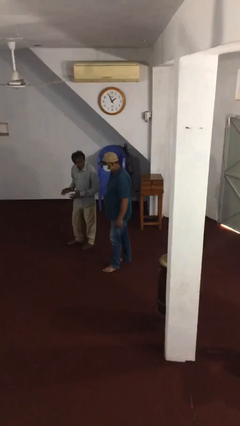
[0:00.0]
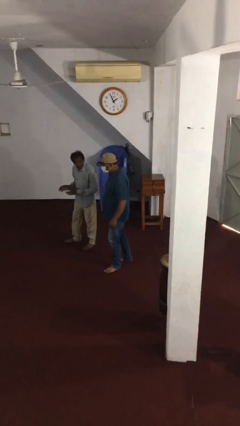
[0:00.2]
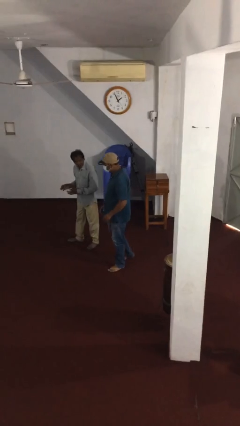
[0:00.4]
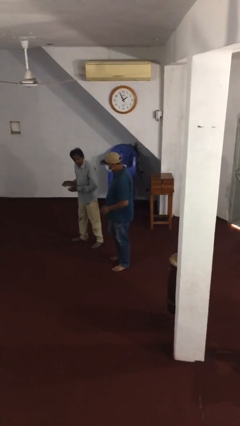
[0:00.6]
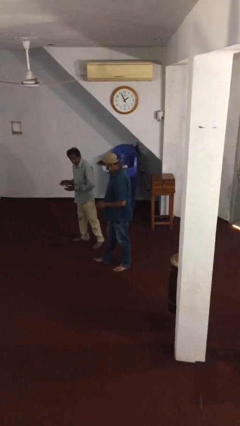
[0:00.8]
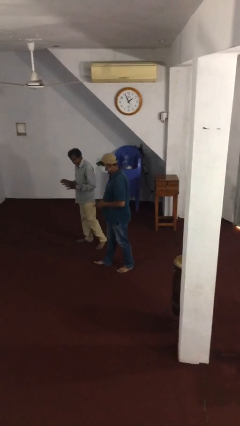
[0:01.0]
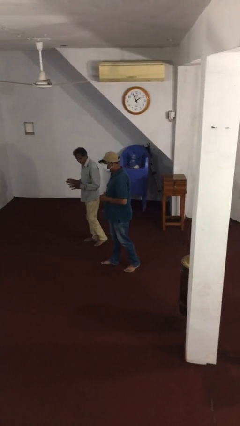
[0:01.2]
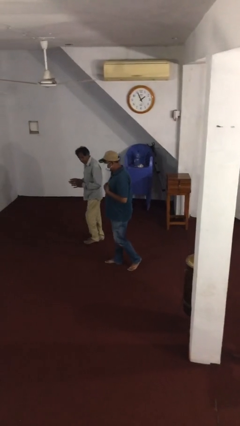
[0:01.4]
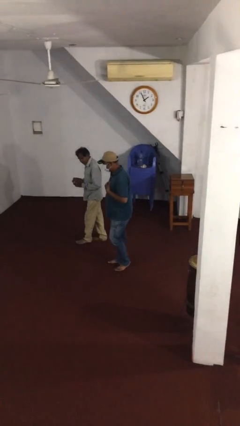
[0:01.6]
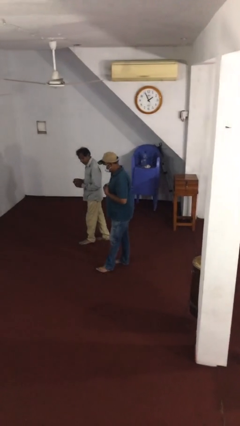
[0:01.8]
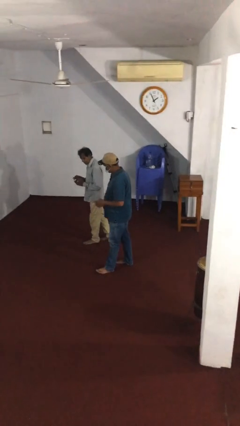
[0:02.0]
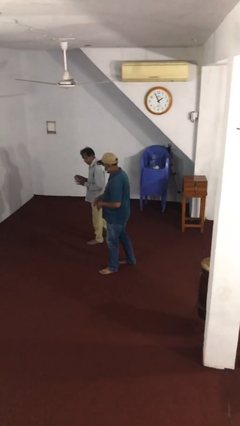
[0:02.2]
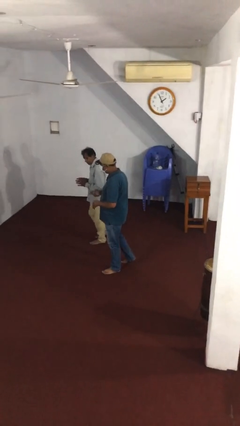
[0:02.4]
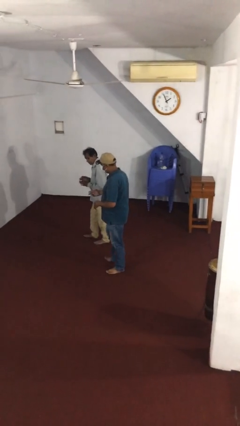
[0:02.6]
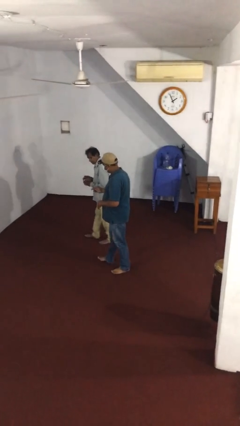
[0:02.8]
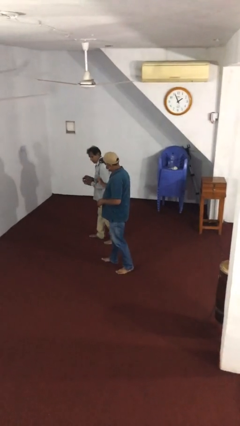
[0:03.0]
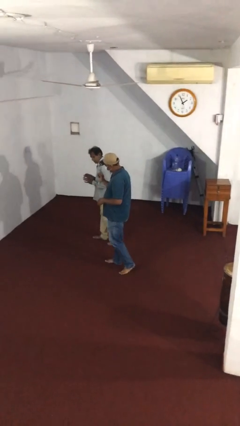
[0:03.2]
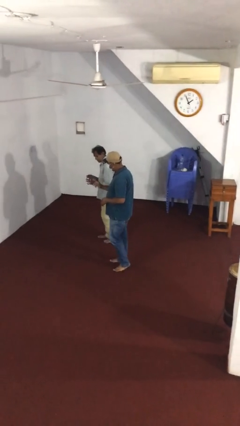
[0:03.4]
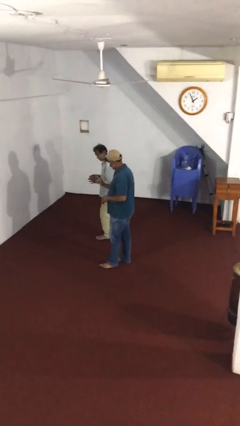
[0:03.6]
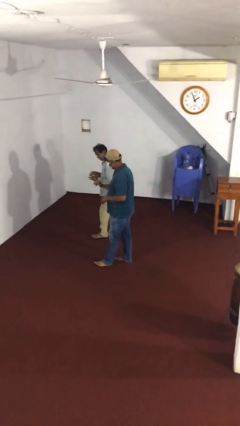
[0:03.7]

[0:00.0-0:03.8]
person talks to person

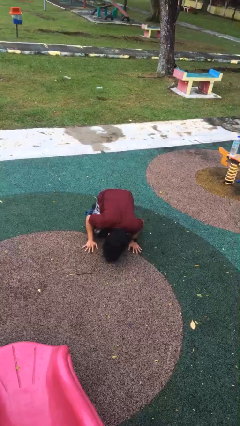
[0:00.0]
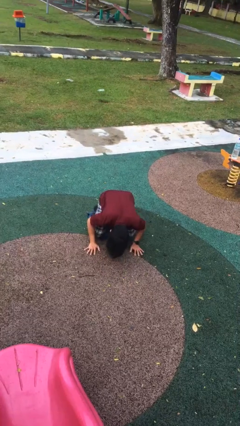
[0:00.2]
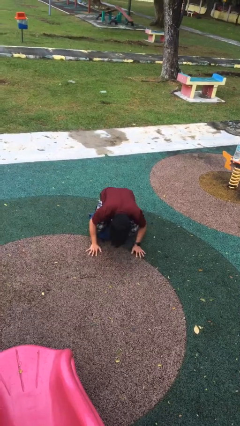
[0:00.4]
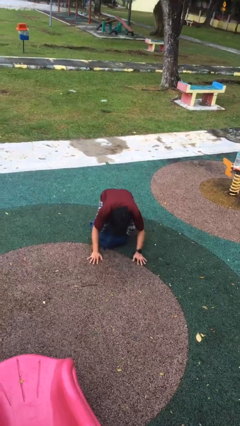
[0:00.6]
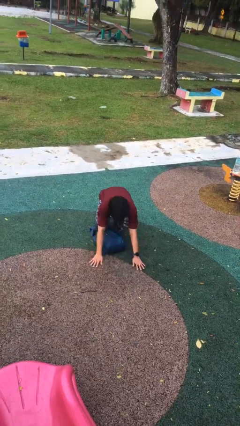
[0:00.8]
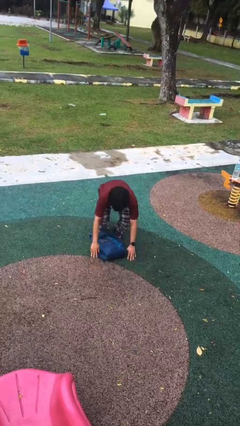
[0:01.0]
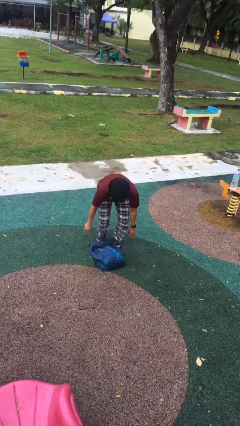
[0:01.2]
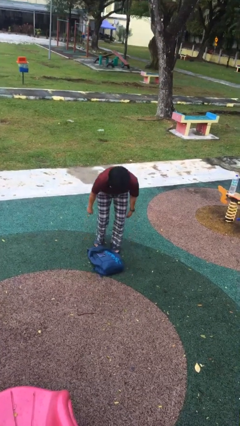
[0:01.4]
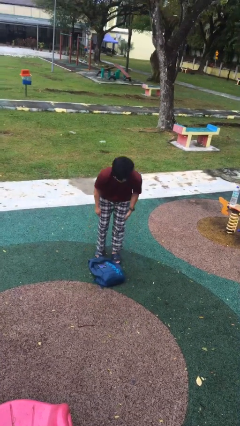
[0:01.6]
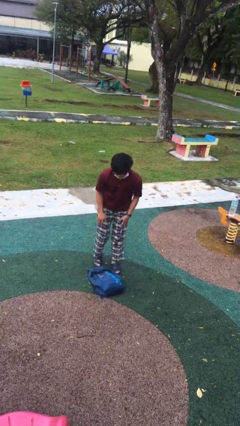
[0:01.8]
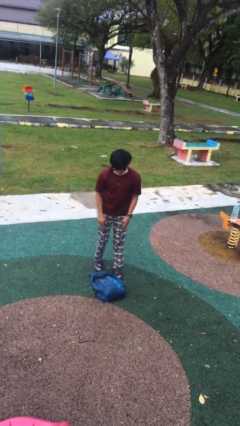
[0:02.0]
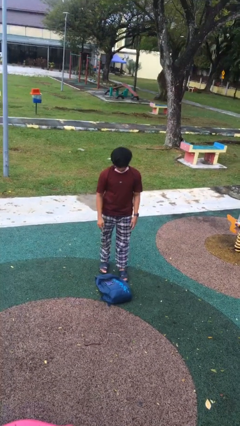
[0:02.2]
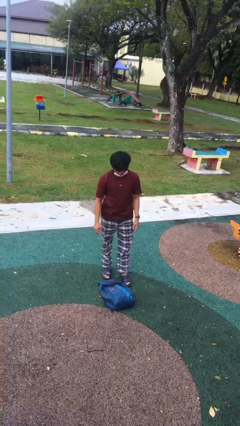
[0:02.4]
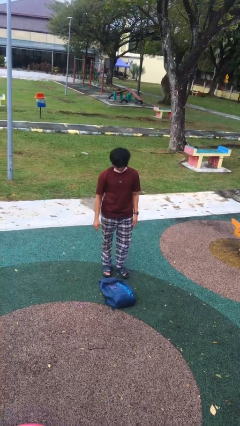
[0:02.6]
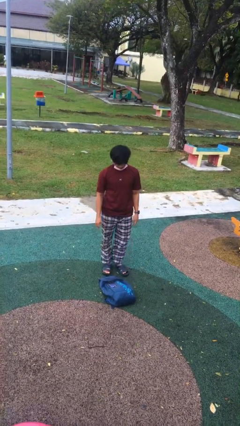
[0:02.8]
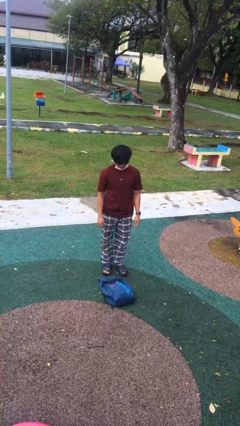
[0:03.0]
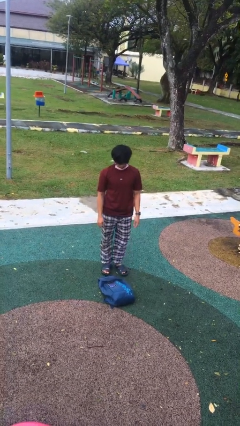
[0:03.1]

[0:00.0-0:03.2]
person stands up from floor

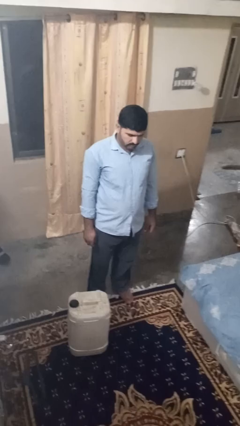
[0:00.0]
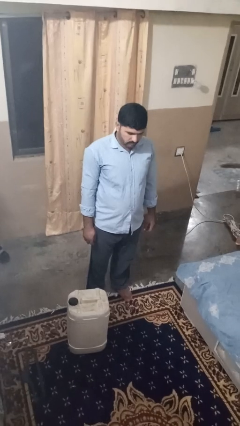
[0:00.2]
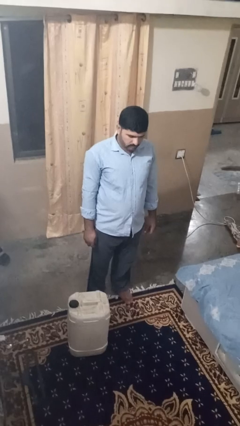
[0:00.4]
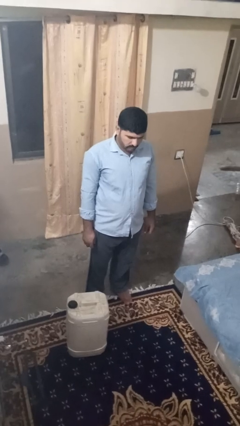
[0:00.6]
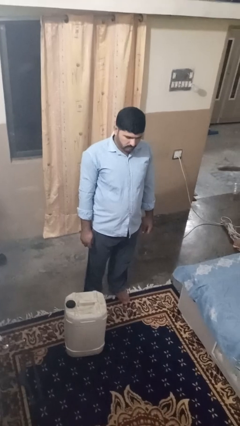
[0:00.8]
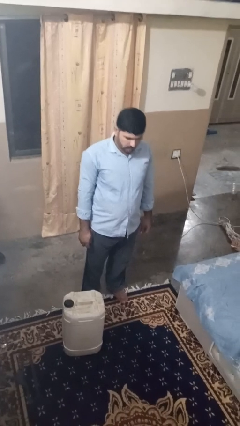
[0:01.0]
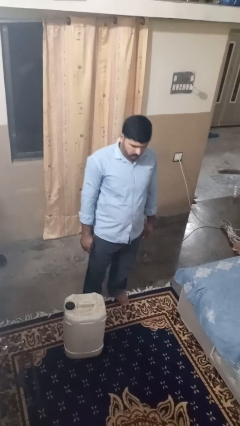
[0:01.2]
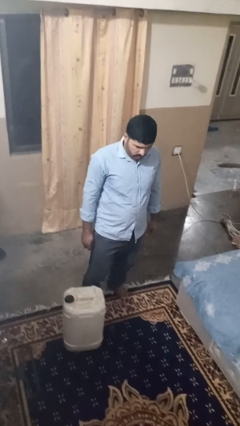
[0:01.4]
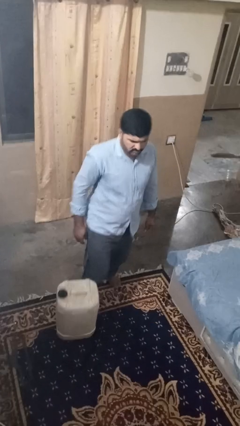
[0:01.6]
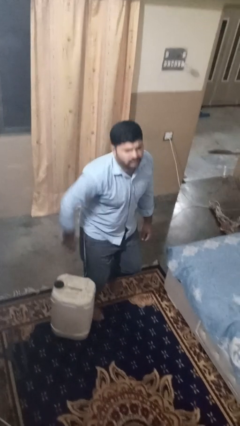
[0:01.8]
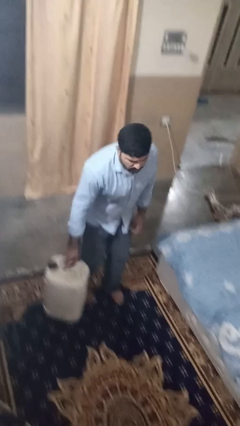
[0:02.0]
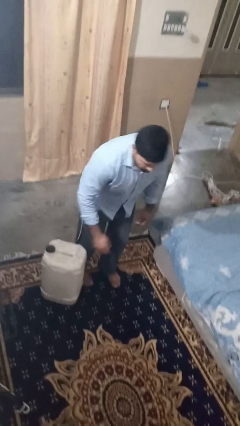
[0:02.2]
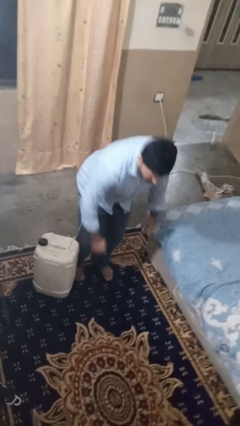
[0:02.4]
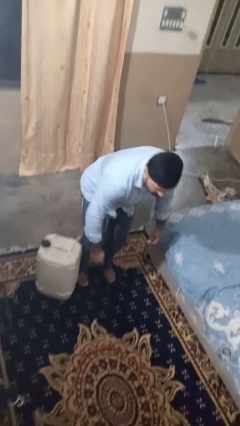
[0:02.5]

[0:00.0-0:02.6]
person trips on object on floor

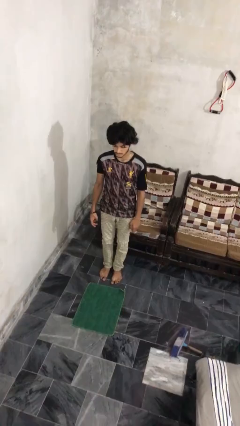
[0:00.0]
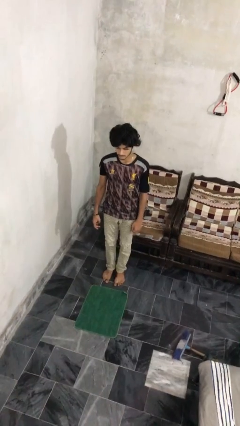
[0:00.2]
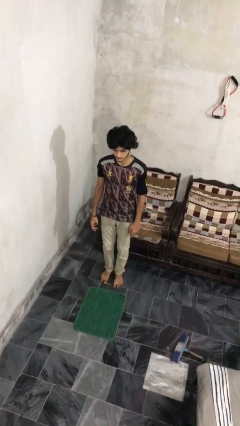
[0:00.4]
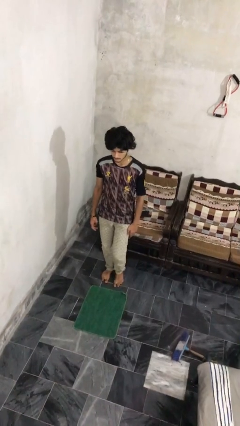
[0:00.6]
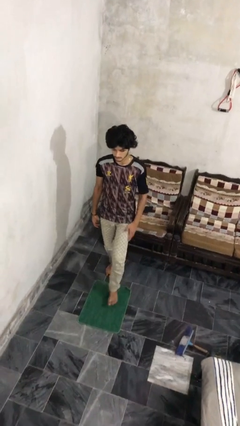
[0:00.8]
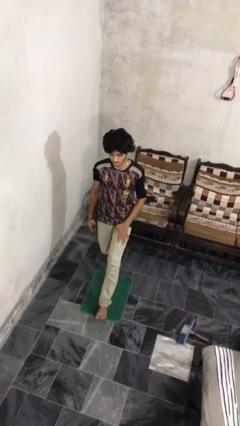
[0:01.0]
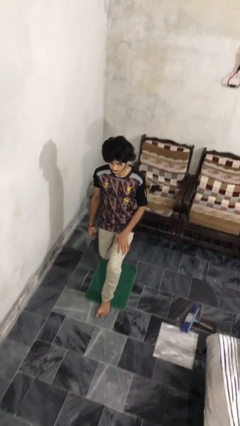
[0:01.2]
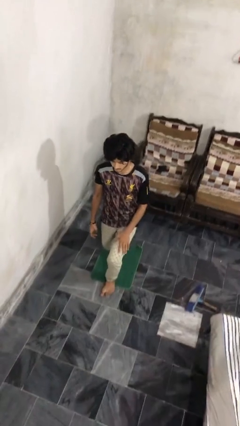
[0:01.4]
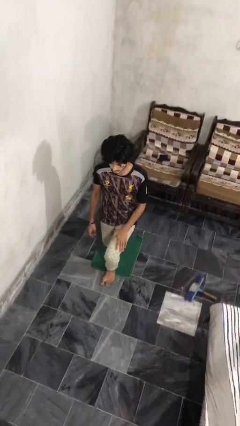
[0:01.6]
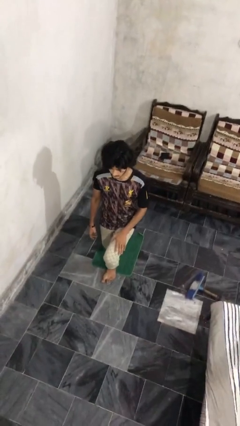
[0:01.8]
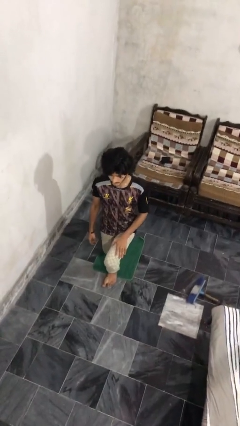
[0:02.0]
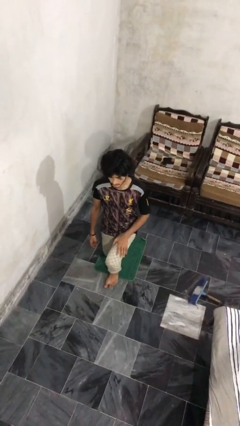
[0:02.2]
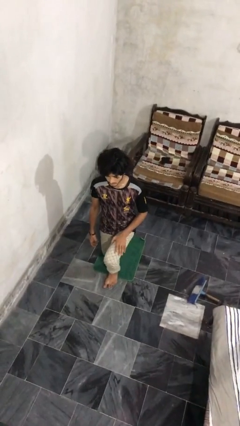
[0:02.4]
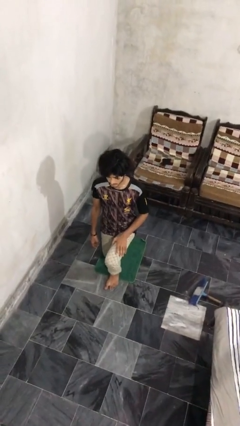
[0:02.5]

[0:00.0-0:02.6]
person kneels

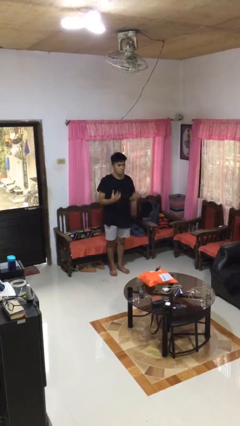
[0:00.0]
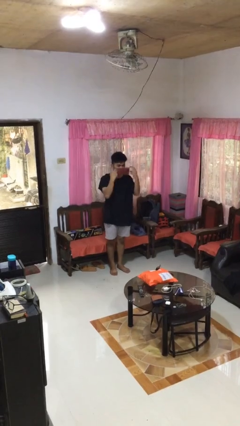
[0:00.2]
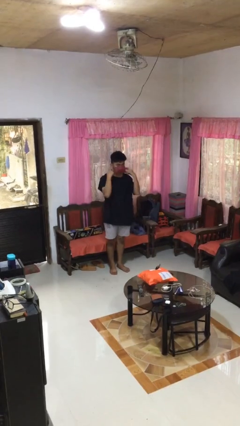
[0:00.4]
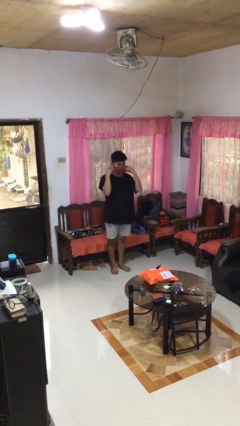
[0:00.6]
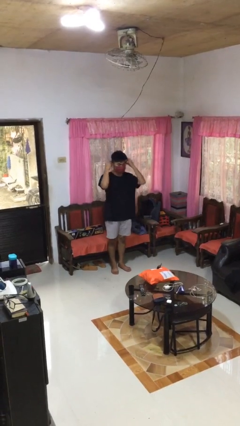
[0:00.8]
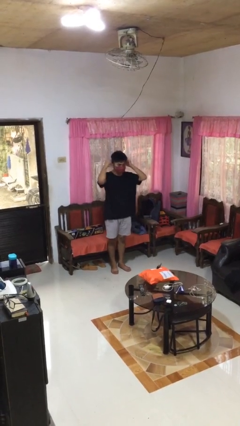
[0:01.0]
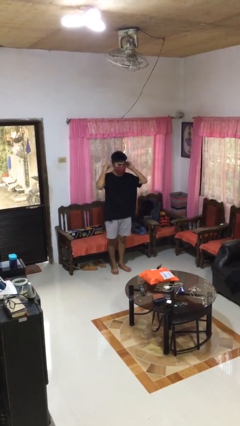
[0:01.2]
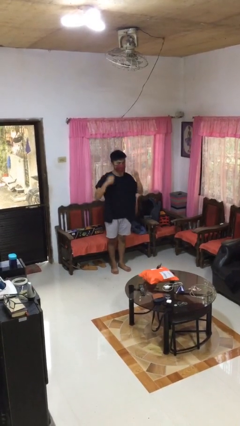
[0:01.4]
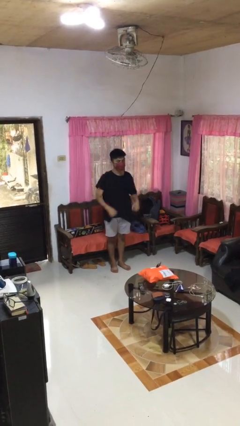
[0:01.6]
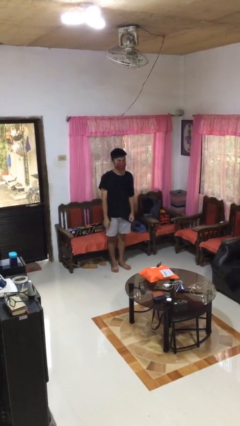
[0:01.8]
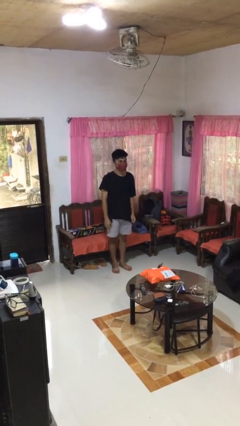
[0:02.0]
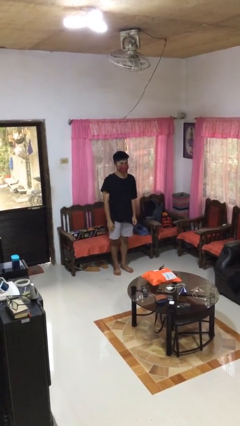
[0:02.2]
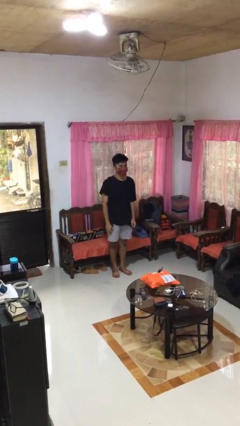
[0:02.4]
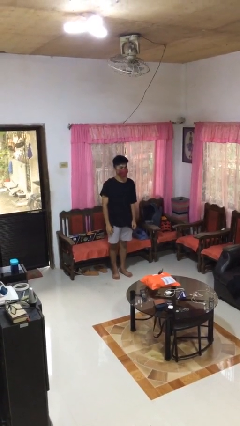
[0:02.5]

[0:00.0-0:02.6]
person puts on facemask

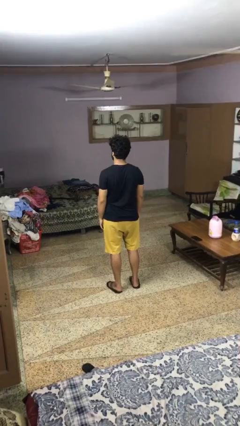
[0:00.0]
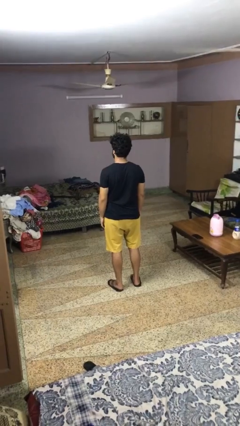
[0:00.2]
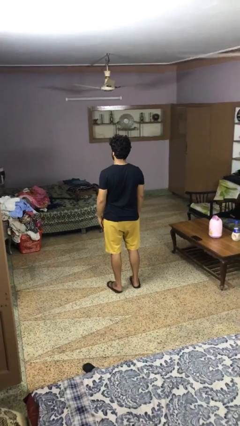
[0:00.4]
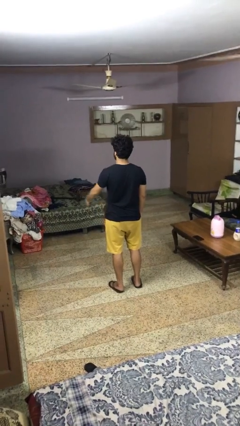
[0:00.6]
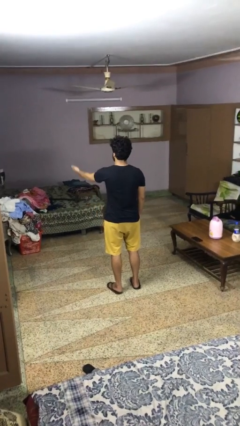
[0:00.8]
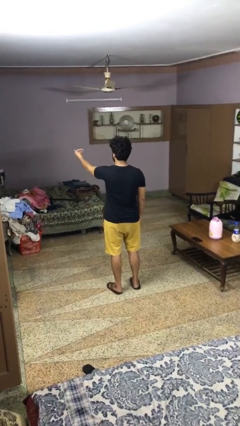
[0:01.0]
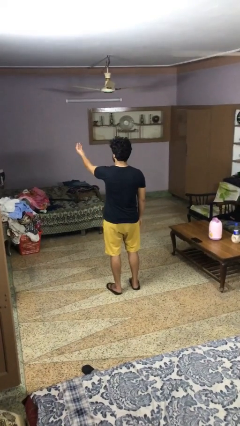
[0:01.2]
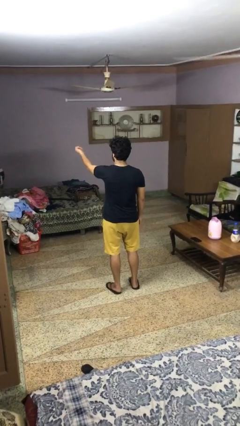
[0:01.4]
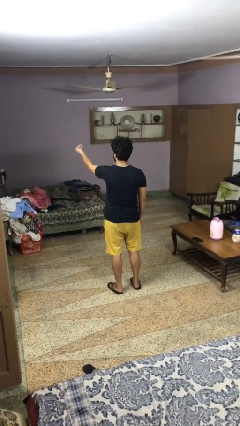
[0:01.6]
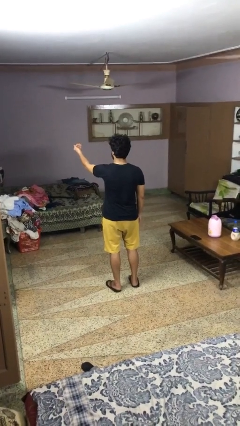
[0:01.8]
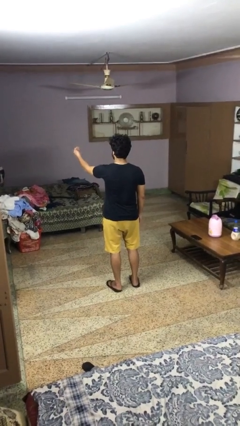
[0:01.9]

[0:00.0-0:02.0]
person gestures come here

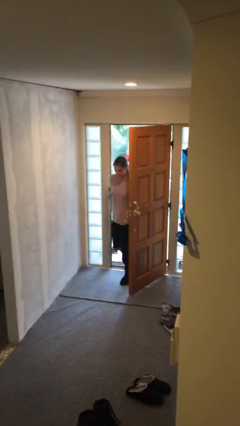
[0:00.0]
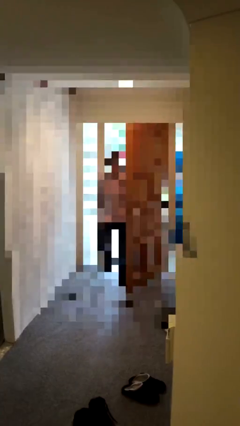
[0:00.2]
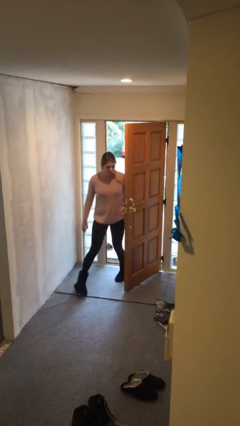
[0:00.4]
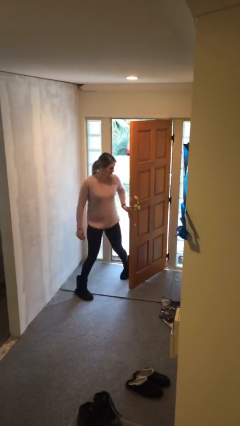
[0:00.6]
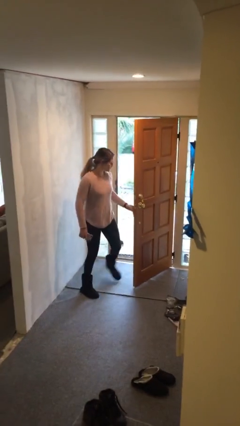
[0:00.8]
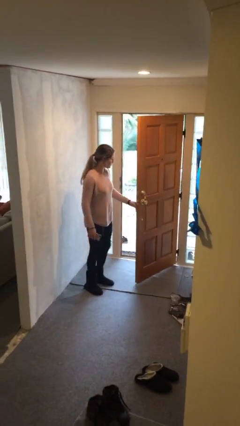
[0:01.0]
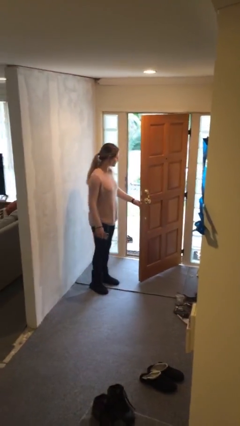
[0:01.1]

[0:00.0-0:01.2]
person enters scene through structure
